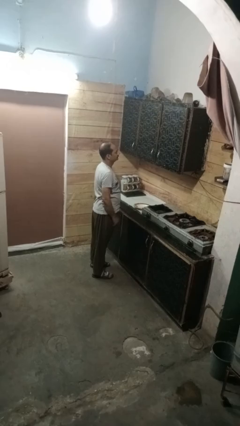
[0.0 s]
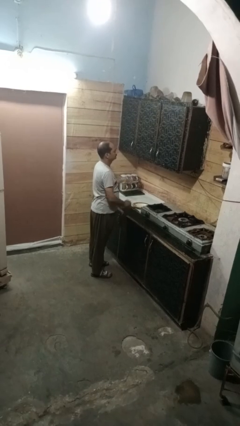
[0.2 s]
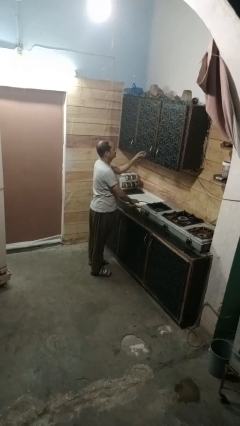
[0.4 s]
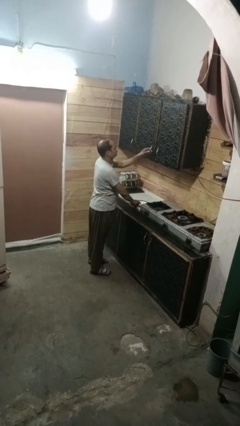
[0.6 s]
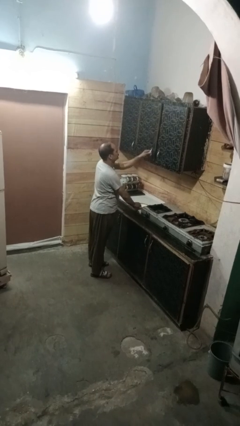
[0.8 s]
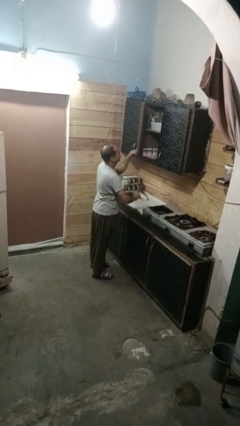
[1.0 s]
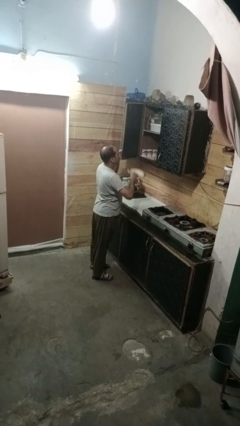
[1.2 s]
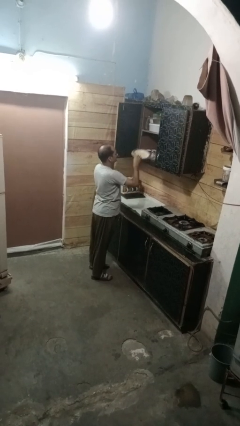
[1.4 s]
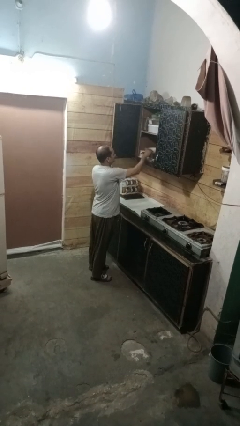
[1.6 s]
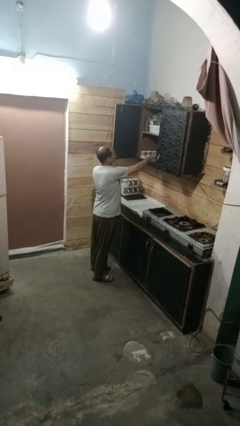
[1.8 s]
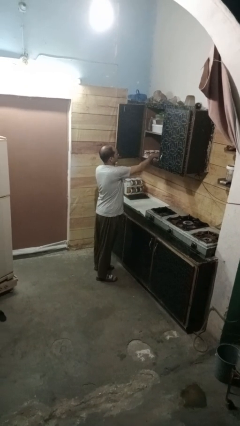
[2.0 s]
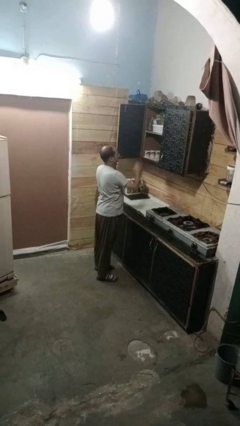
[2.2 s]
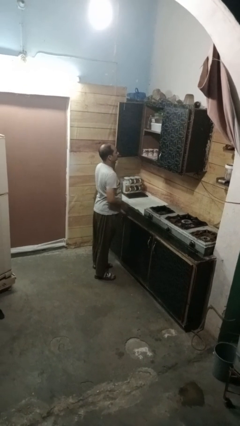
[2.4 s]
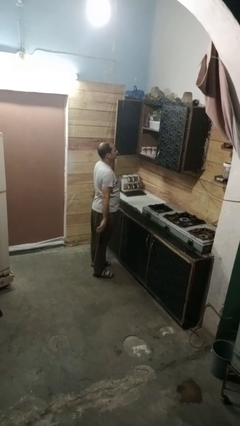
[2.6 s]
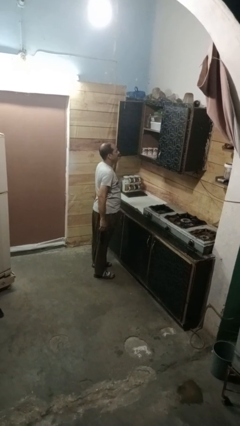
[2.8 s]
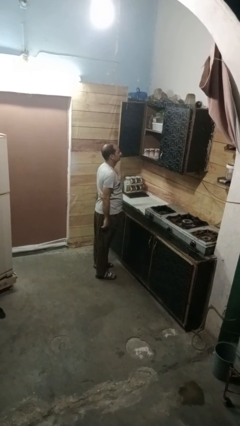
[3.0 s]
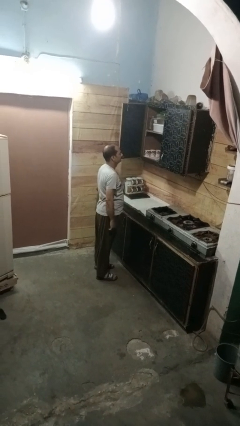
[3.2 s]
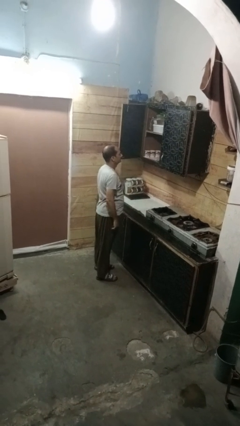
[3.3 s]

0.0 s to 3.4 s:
person puts object in cabinet

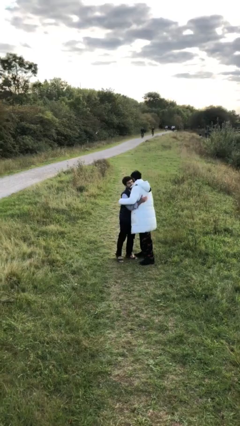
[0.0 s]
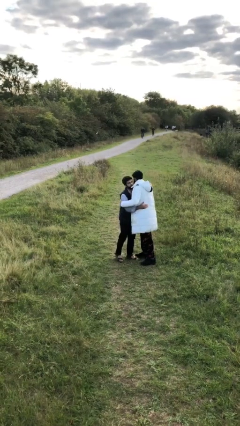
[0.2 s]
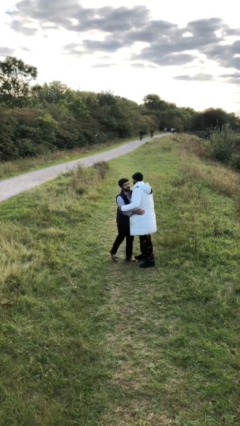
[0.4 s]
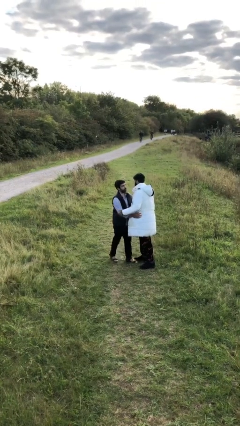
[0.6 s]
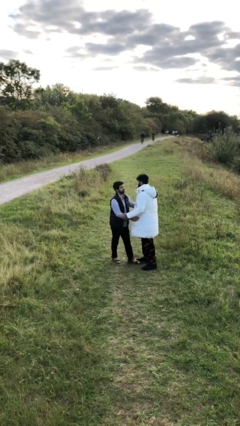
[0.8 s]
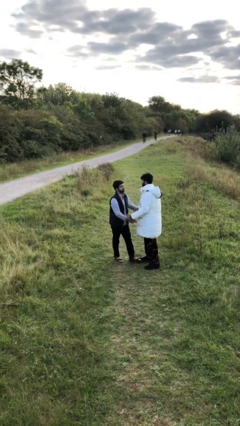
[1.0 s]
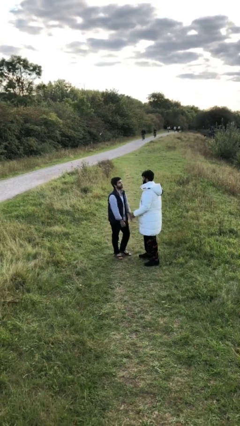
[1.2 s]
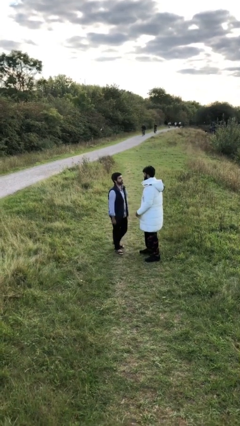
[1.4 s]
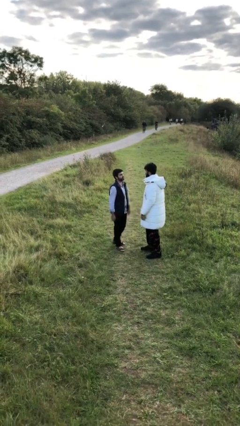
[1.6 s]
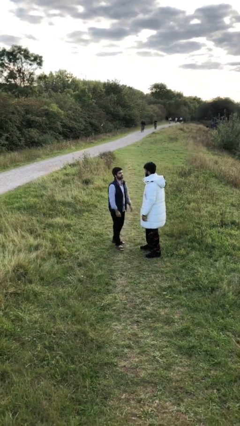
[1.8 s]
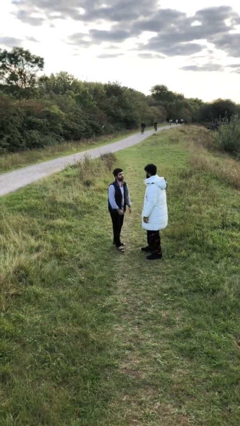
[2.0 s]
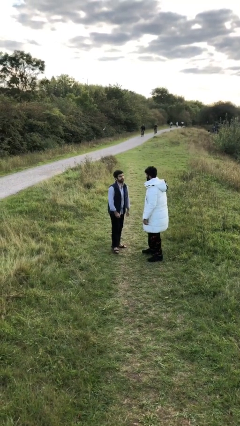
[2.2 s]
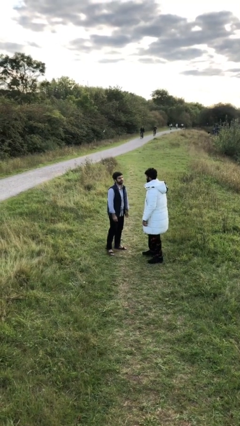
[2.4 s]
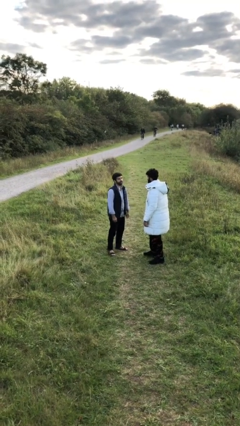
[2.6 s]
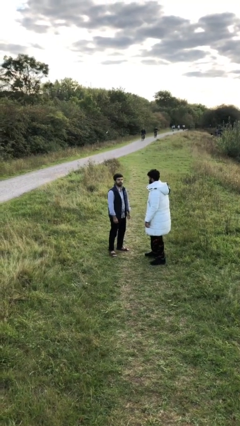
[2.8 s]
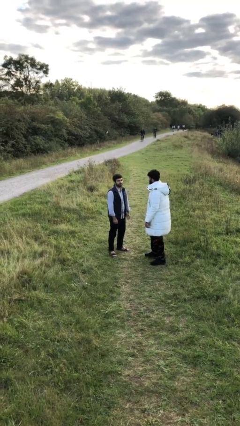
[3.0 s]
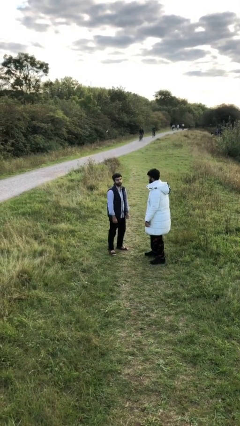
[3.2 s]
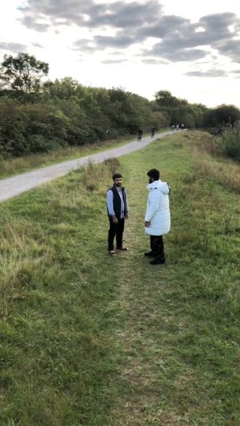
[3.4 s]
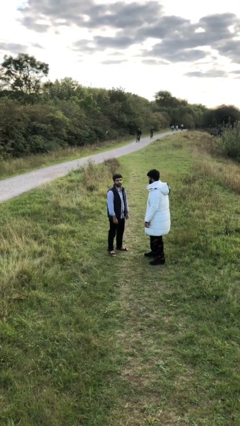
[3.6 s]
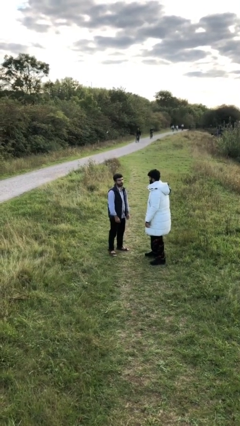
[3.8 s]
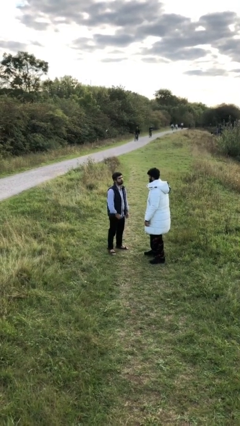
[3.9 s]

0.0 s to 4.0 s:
person talks to person

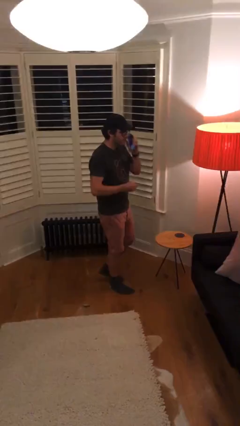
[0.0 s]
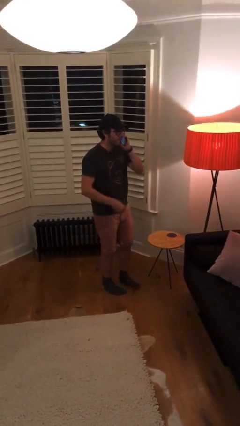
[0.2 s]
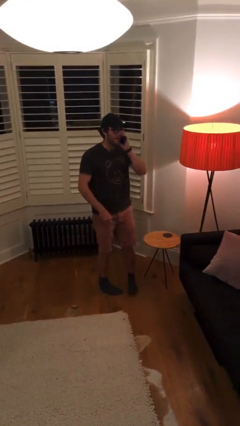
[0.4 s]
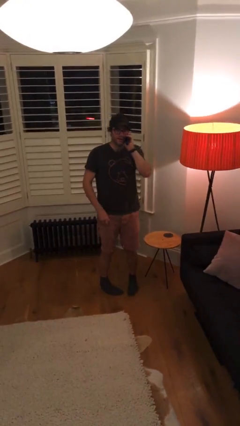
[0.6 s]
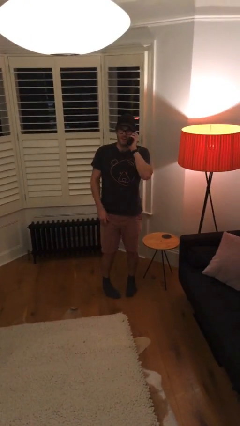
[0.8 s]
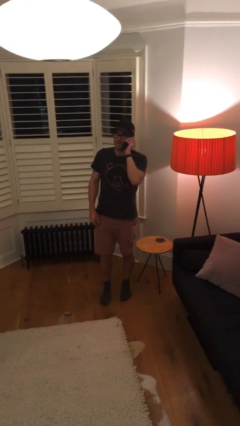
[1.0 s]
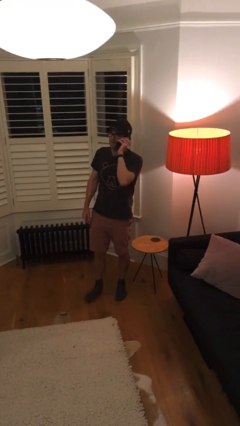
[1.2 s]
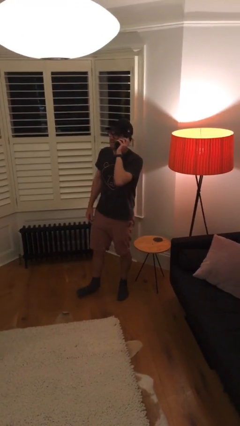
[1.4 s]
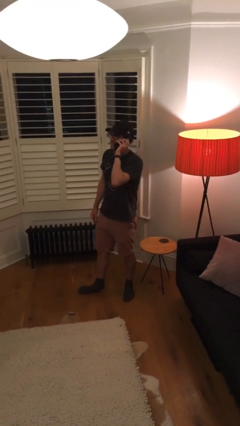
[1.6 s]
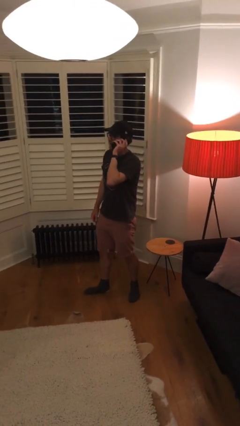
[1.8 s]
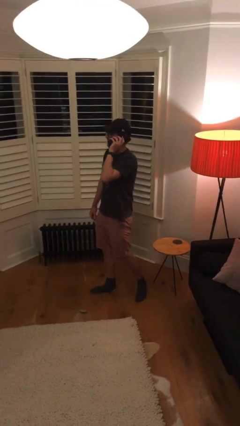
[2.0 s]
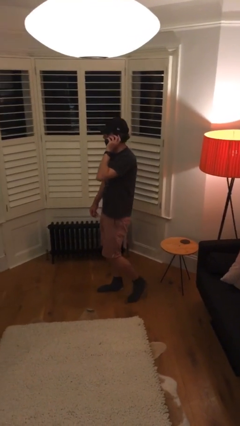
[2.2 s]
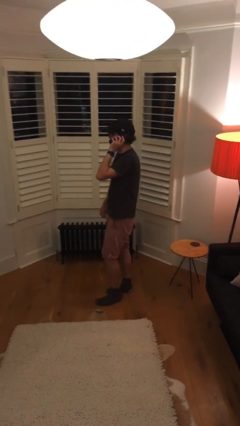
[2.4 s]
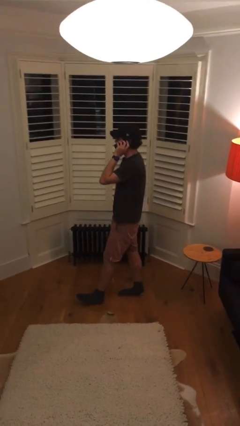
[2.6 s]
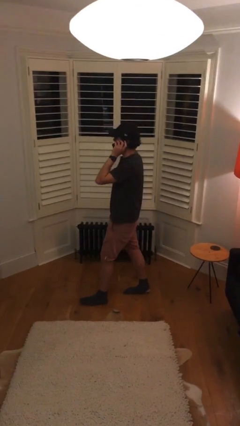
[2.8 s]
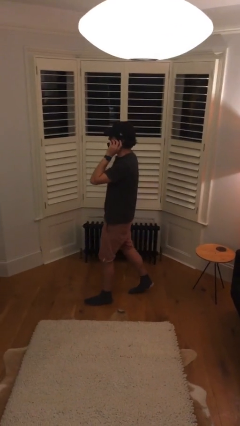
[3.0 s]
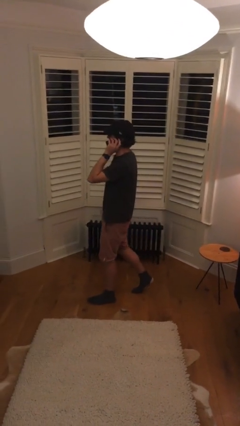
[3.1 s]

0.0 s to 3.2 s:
person talks on phone

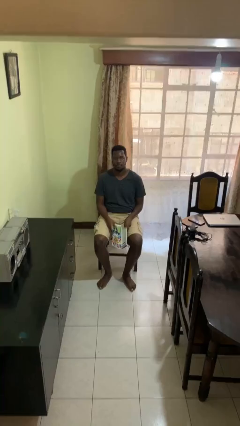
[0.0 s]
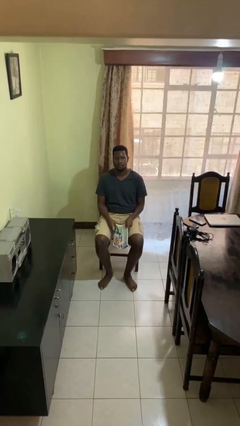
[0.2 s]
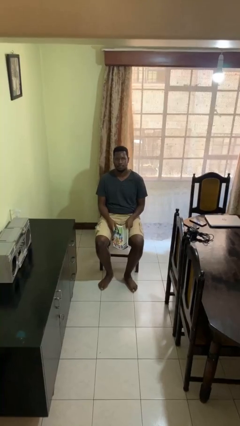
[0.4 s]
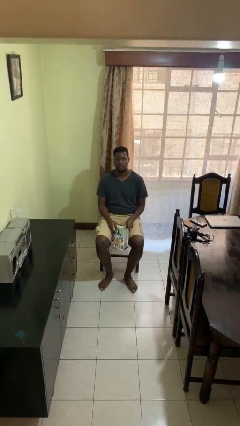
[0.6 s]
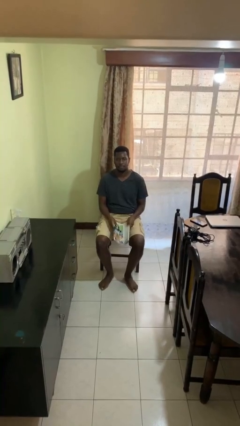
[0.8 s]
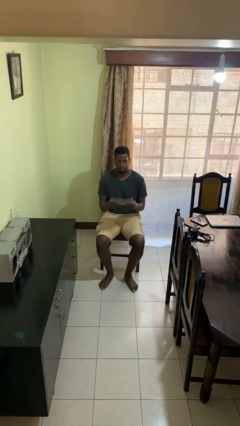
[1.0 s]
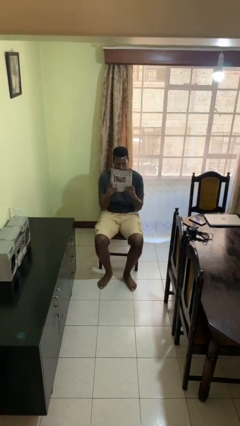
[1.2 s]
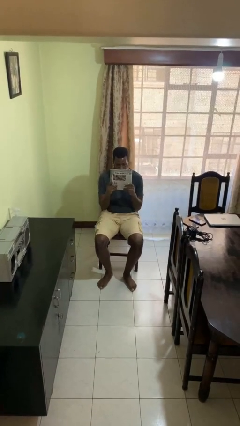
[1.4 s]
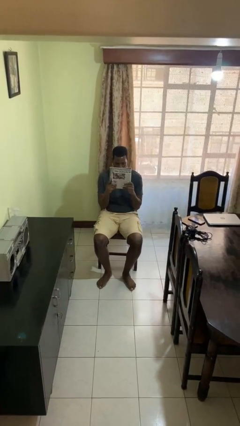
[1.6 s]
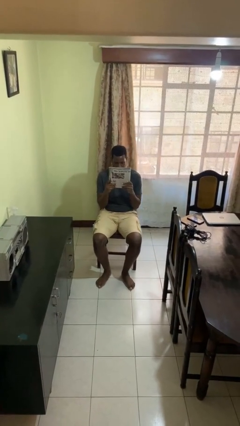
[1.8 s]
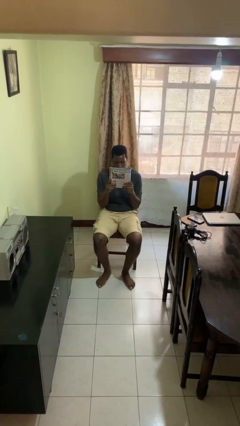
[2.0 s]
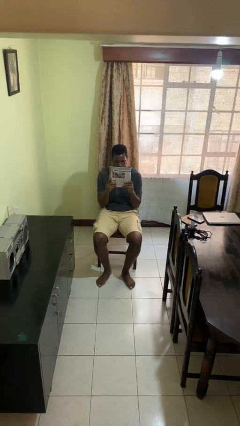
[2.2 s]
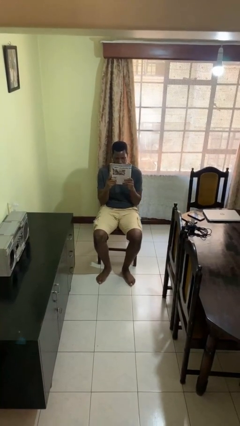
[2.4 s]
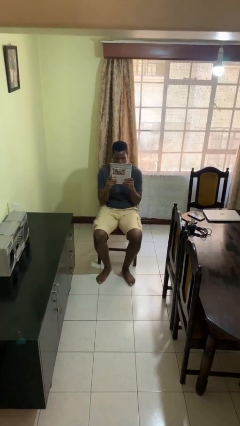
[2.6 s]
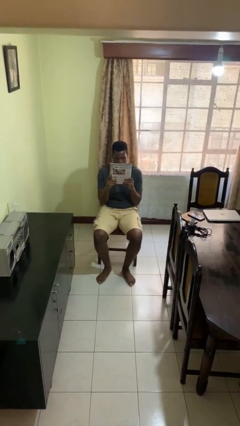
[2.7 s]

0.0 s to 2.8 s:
person reads document

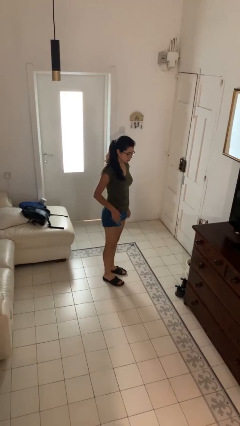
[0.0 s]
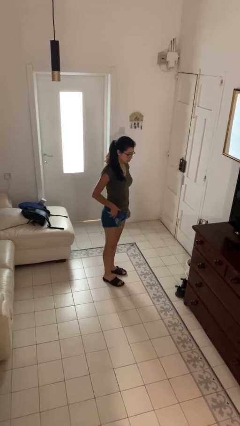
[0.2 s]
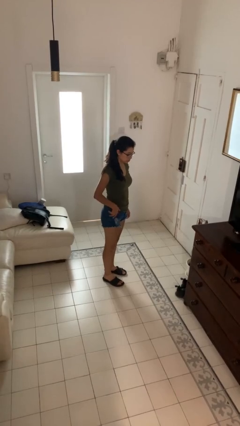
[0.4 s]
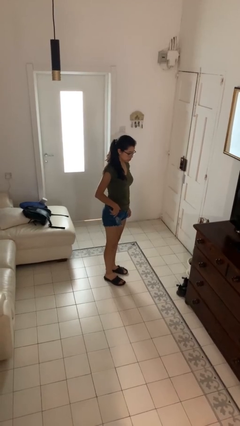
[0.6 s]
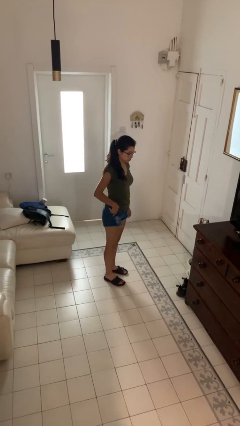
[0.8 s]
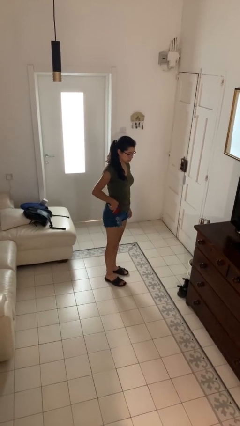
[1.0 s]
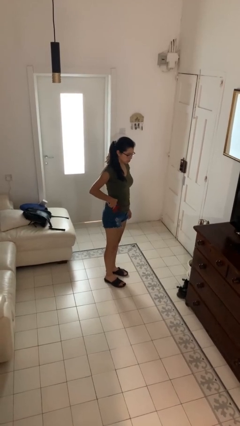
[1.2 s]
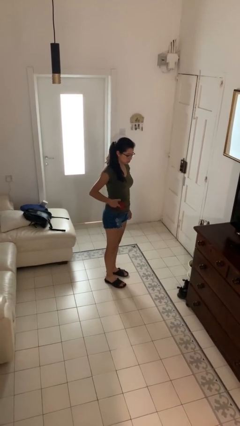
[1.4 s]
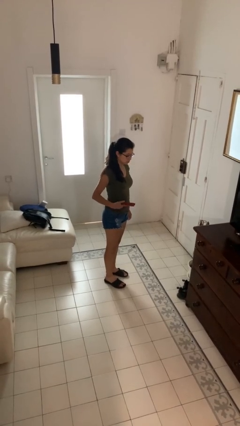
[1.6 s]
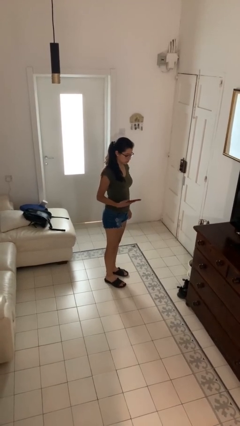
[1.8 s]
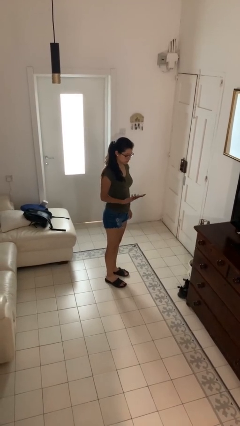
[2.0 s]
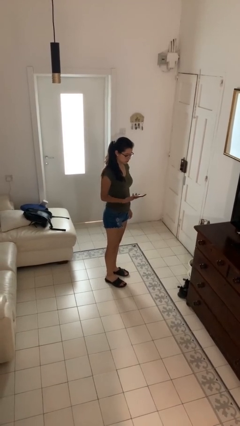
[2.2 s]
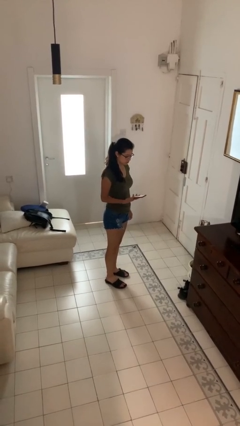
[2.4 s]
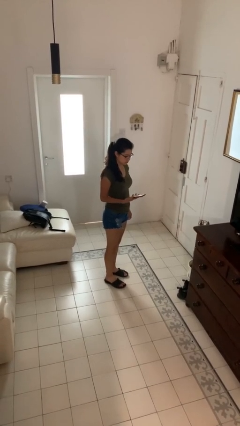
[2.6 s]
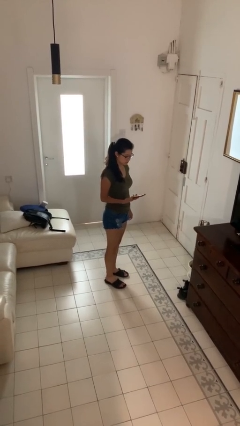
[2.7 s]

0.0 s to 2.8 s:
person takes phone from pocket

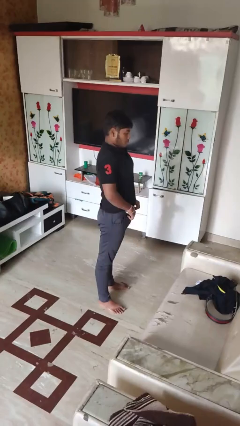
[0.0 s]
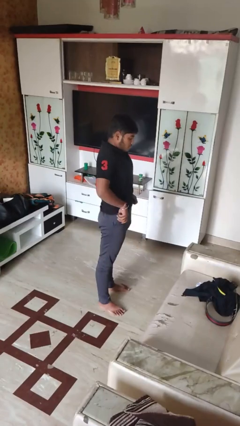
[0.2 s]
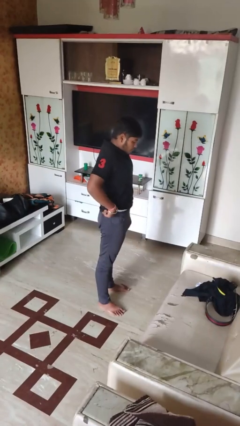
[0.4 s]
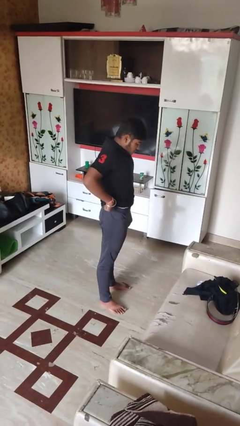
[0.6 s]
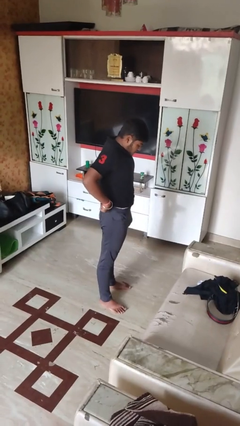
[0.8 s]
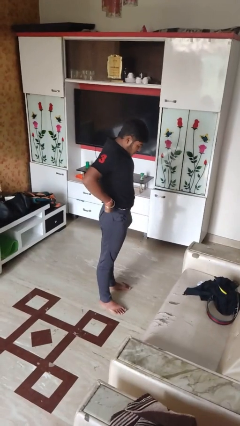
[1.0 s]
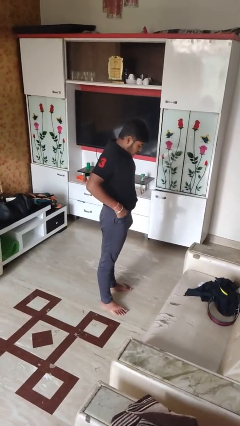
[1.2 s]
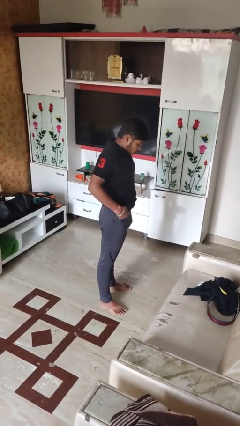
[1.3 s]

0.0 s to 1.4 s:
person hikes up pants
